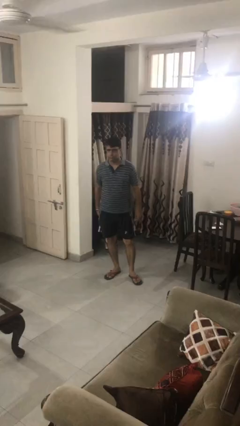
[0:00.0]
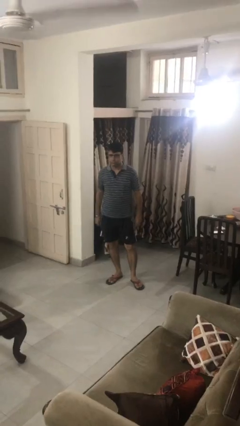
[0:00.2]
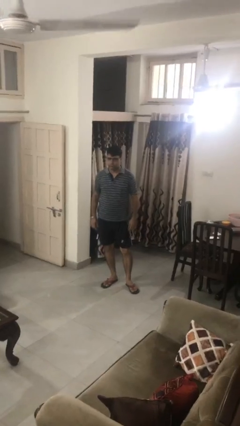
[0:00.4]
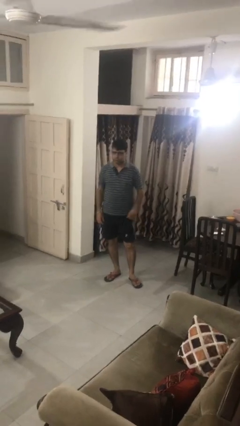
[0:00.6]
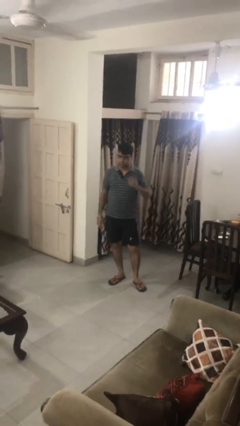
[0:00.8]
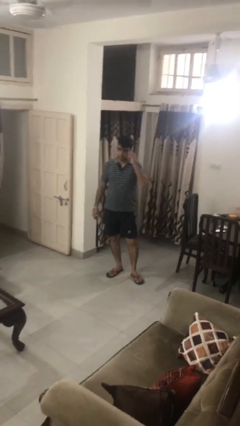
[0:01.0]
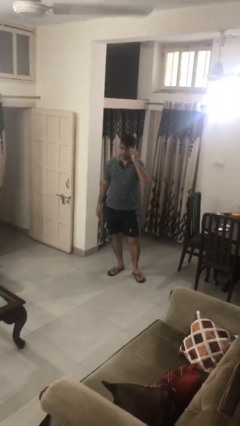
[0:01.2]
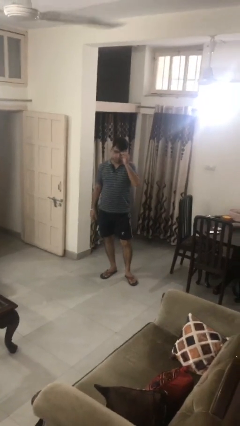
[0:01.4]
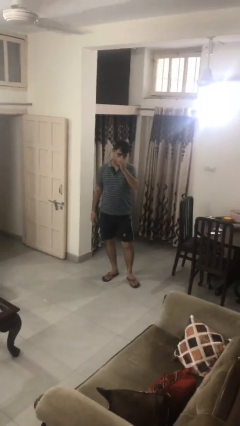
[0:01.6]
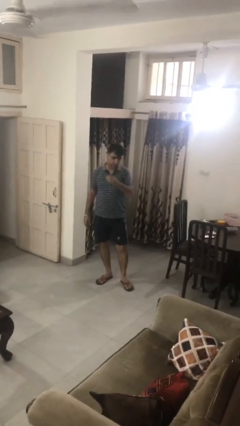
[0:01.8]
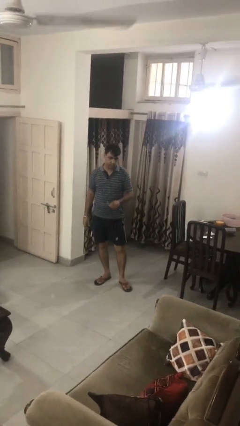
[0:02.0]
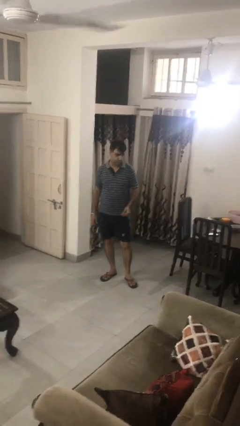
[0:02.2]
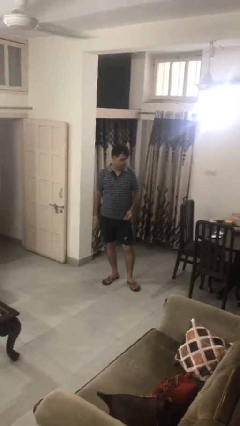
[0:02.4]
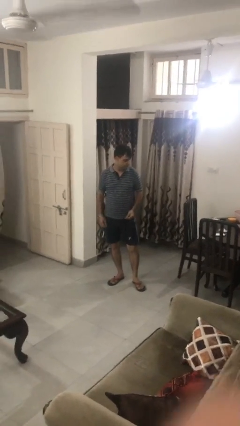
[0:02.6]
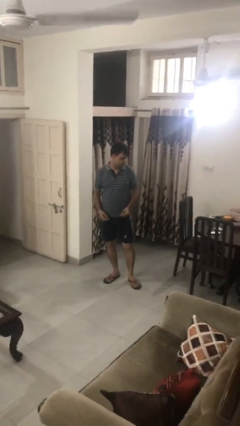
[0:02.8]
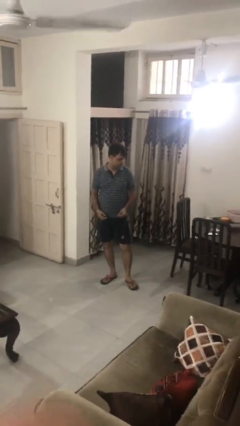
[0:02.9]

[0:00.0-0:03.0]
person takes off glasses

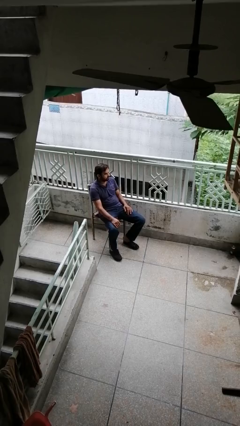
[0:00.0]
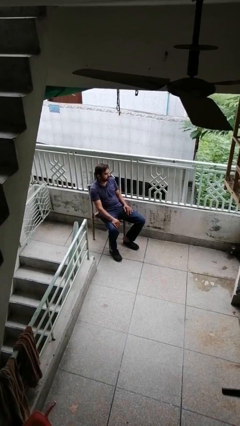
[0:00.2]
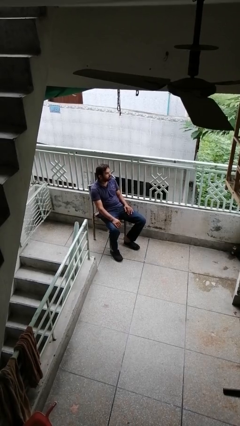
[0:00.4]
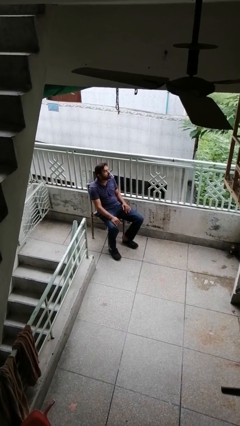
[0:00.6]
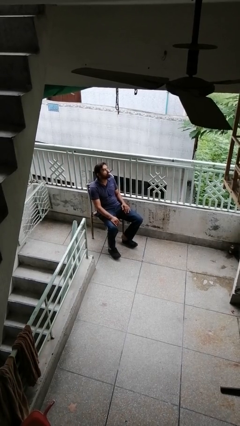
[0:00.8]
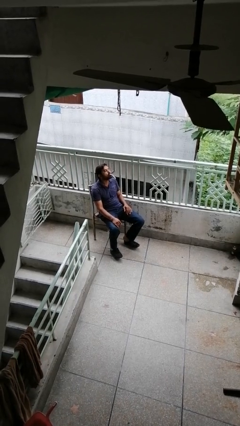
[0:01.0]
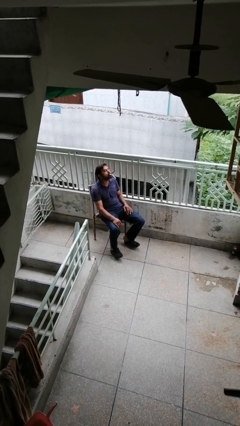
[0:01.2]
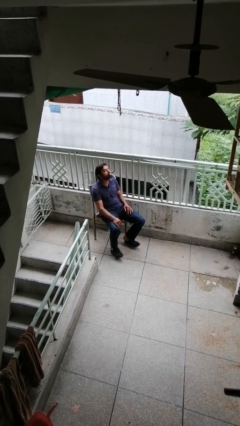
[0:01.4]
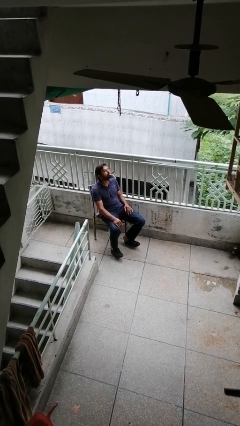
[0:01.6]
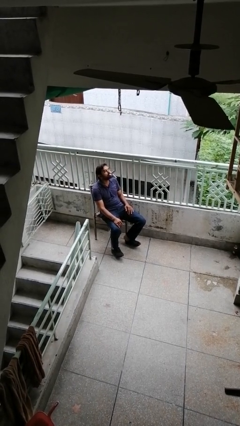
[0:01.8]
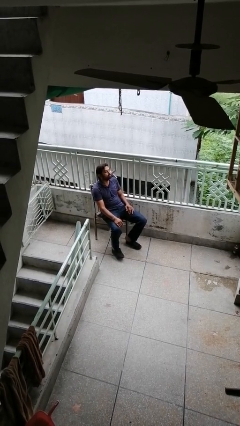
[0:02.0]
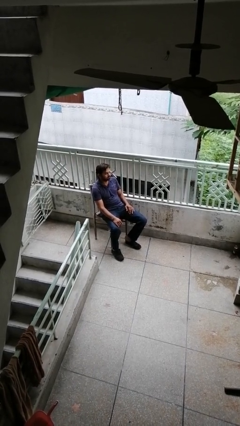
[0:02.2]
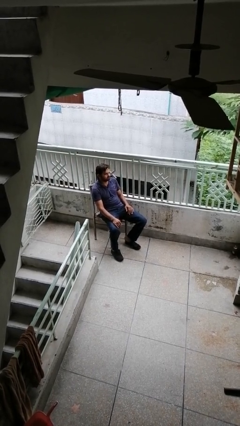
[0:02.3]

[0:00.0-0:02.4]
person sticks out tongue

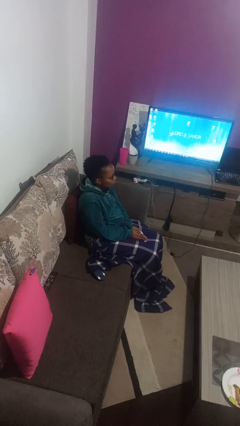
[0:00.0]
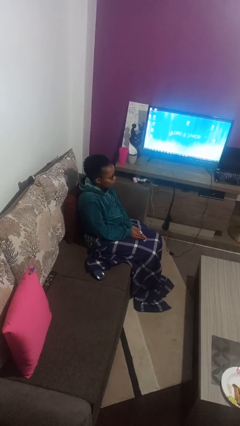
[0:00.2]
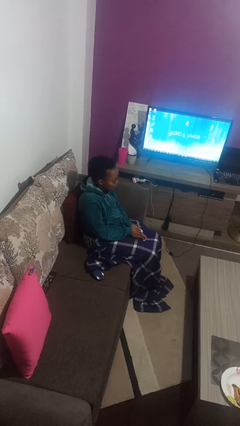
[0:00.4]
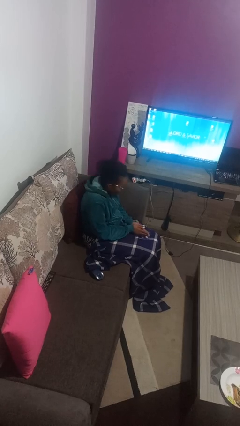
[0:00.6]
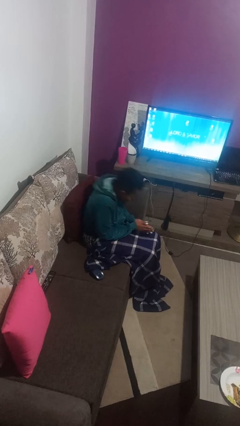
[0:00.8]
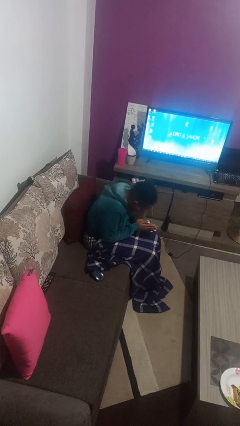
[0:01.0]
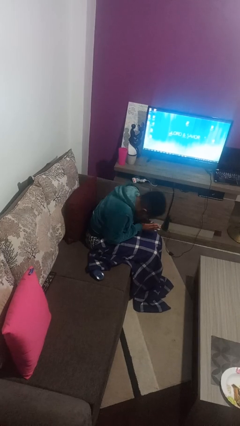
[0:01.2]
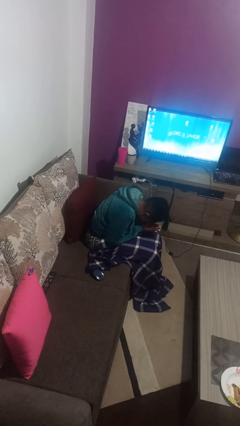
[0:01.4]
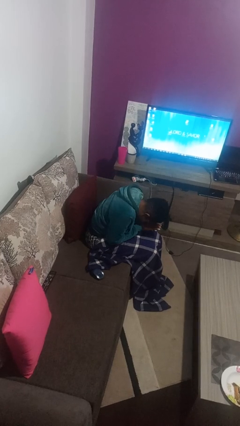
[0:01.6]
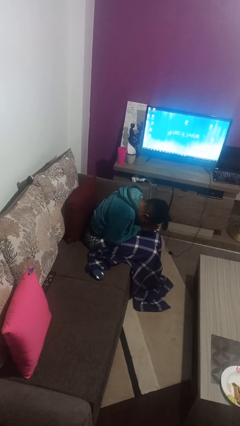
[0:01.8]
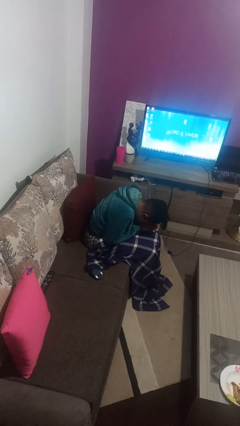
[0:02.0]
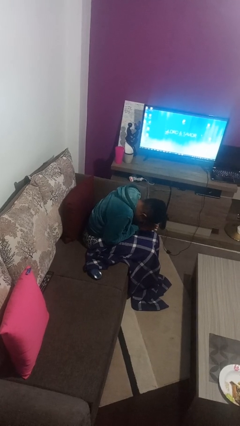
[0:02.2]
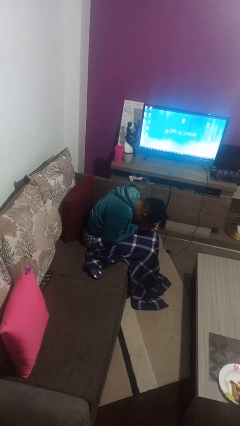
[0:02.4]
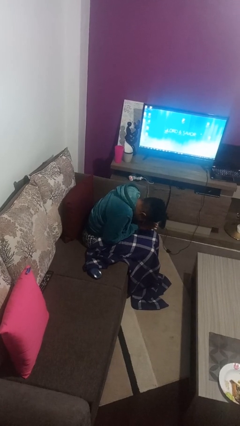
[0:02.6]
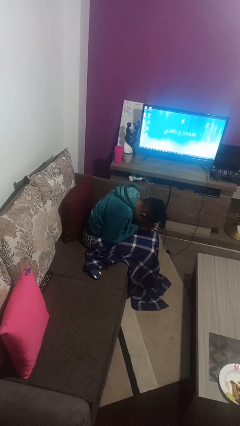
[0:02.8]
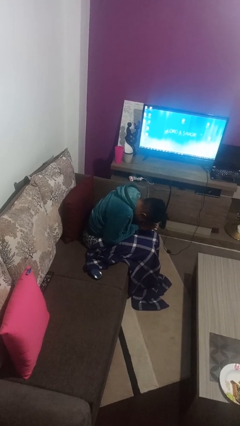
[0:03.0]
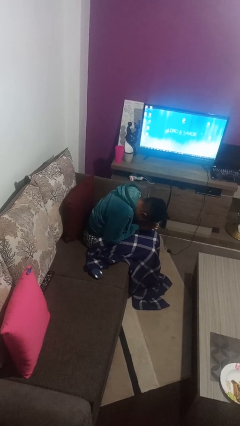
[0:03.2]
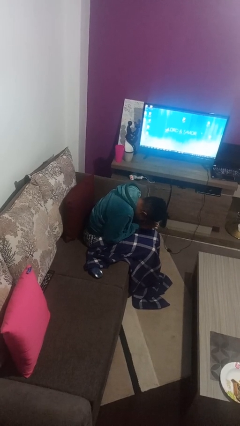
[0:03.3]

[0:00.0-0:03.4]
person prays

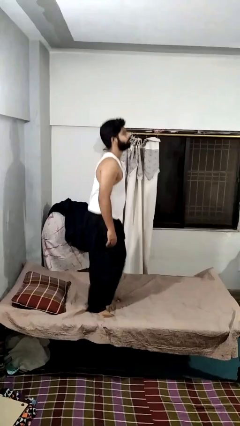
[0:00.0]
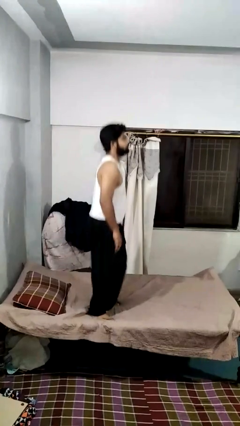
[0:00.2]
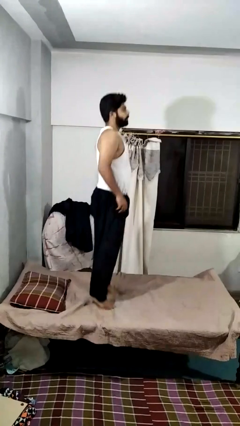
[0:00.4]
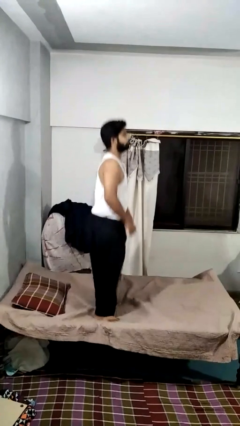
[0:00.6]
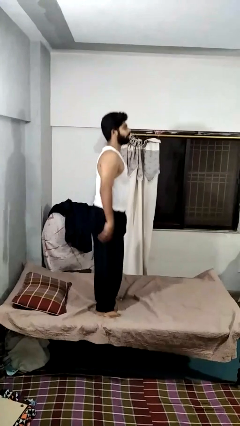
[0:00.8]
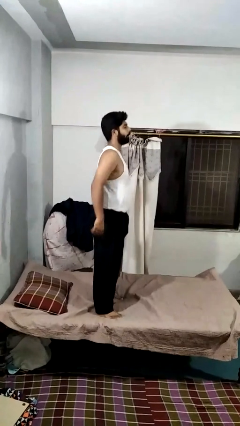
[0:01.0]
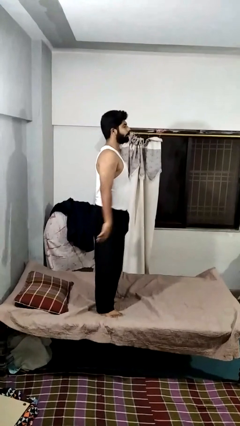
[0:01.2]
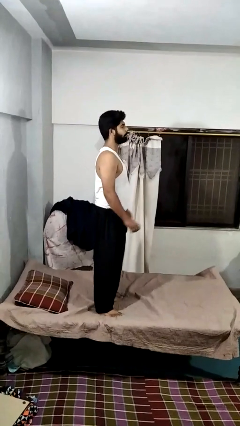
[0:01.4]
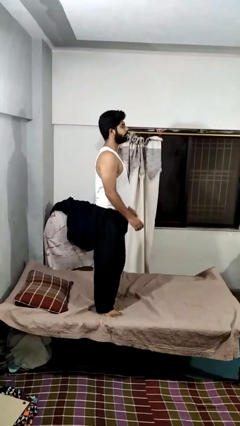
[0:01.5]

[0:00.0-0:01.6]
person jumps on bed

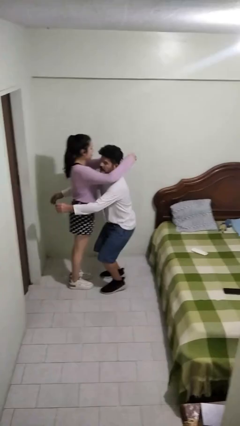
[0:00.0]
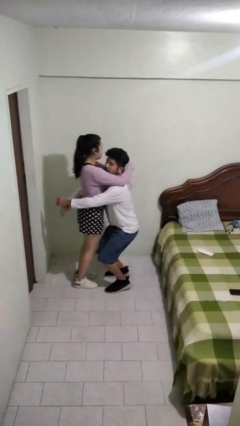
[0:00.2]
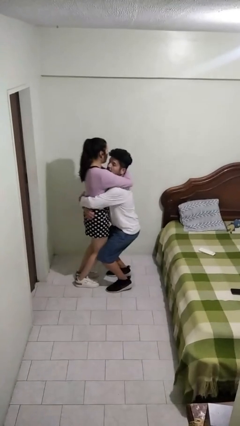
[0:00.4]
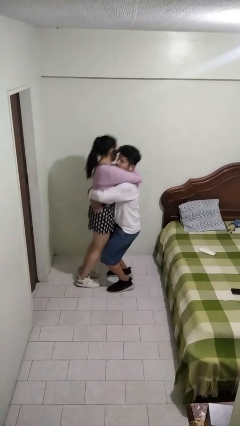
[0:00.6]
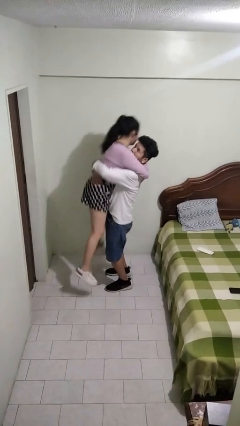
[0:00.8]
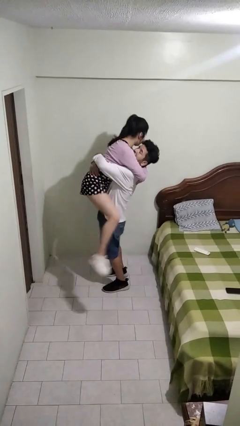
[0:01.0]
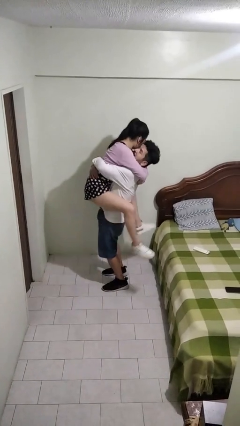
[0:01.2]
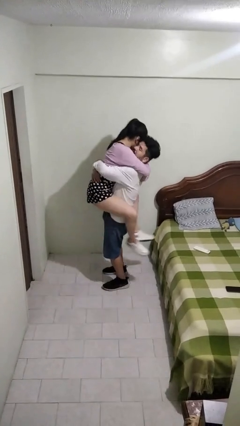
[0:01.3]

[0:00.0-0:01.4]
person picks up person

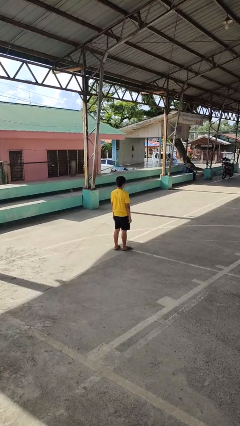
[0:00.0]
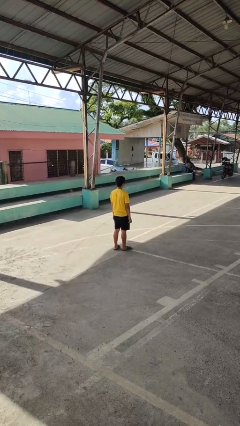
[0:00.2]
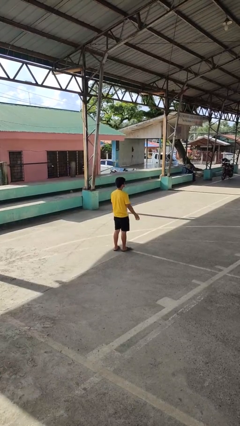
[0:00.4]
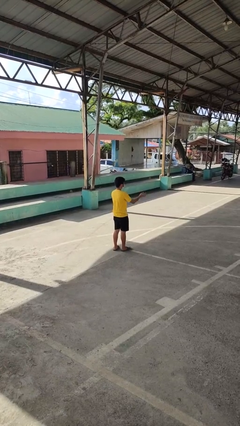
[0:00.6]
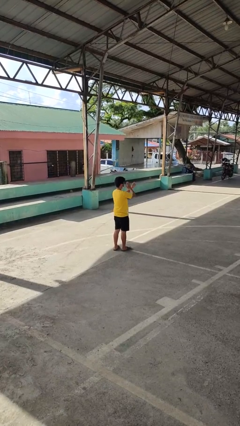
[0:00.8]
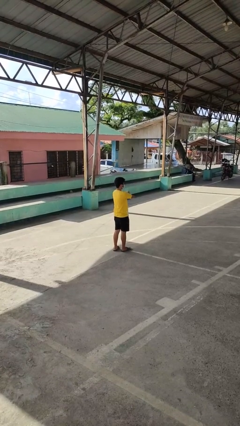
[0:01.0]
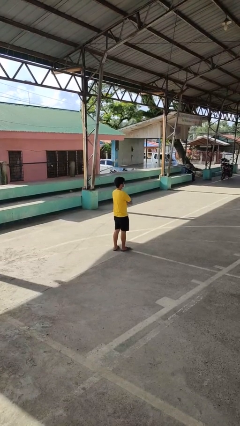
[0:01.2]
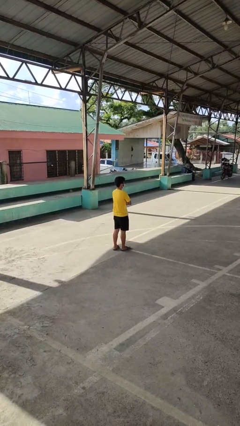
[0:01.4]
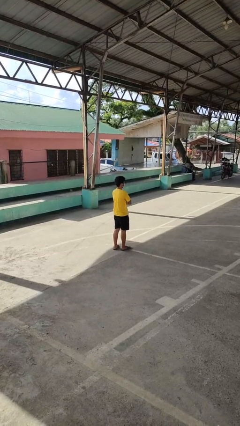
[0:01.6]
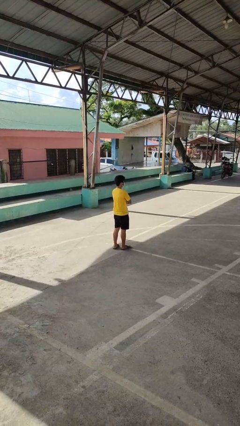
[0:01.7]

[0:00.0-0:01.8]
person crosses arms

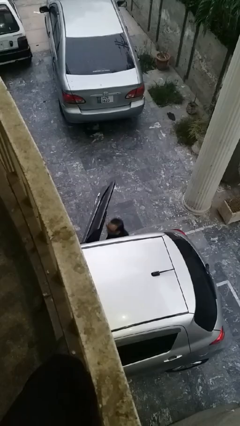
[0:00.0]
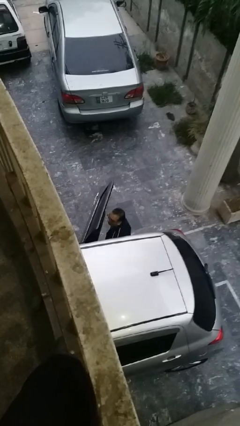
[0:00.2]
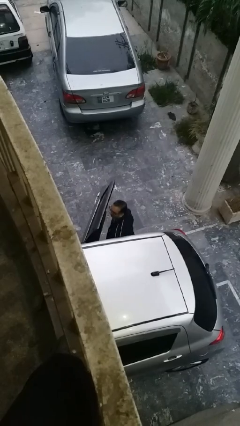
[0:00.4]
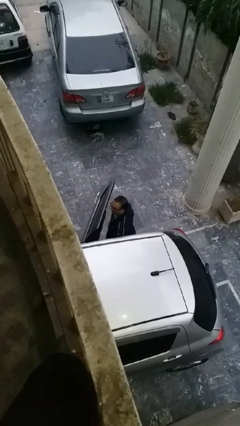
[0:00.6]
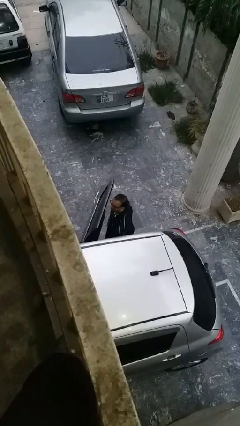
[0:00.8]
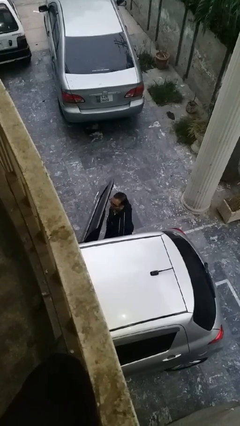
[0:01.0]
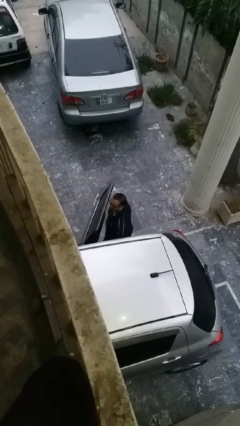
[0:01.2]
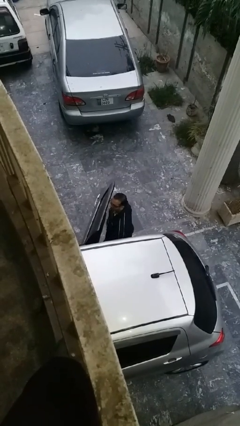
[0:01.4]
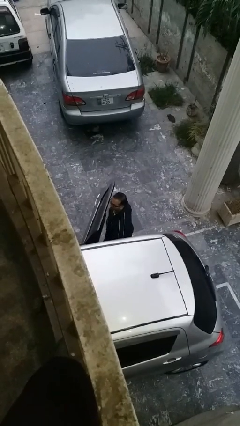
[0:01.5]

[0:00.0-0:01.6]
person exits car

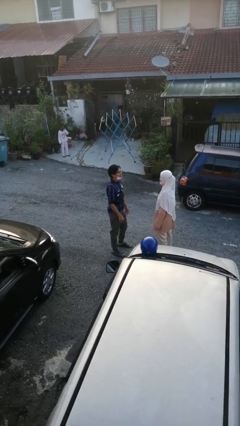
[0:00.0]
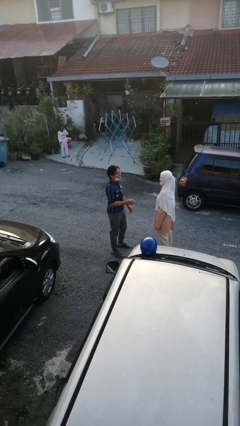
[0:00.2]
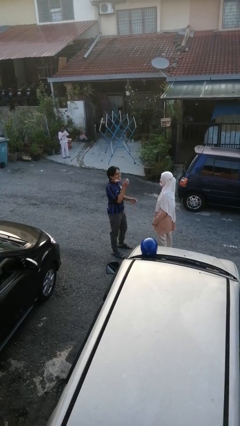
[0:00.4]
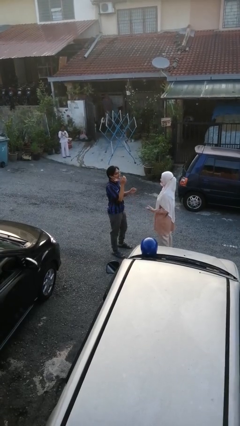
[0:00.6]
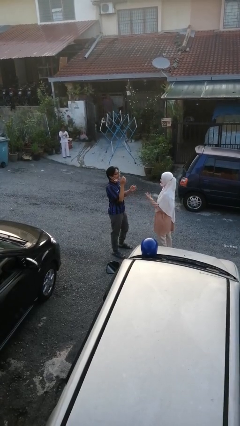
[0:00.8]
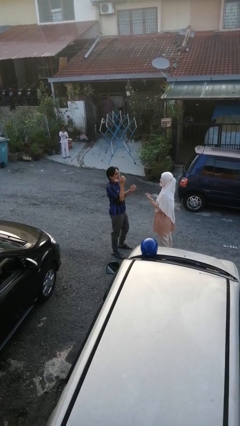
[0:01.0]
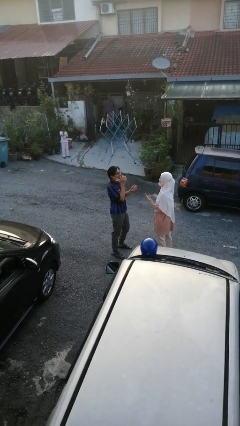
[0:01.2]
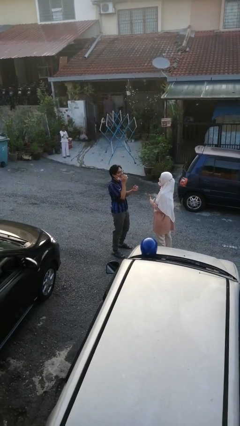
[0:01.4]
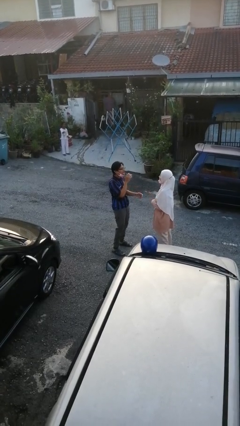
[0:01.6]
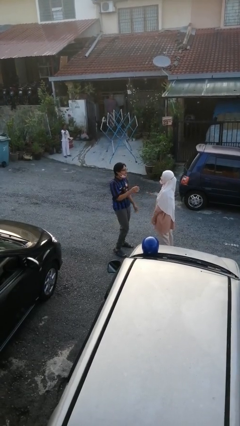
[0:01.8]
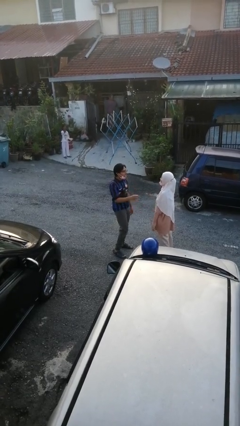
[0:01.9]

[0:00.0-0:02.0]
person laughs with person
